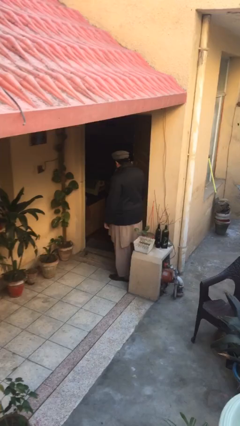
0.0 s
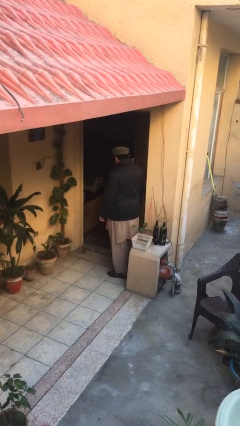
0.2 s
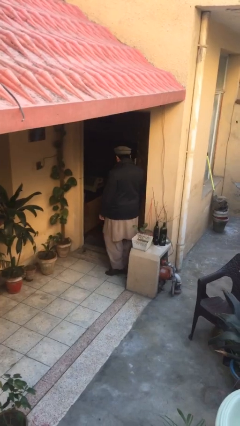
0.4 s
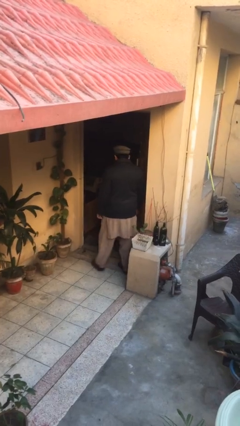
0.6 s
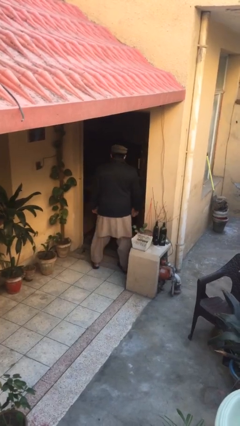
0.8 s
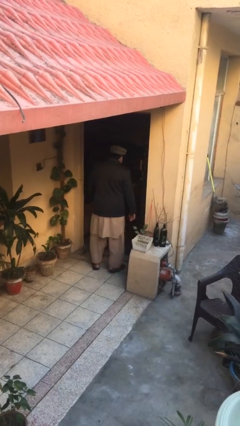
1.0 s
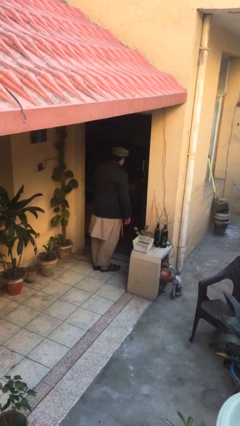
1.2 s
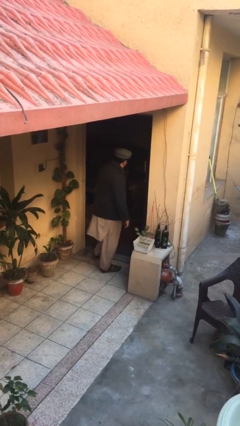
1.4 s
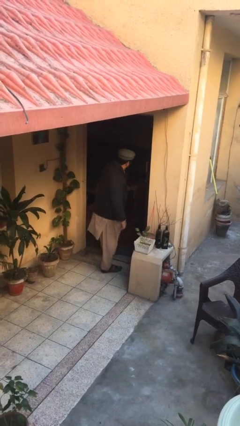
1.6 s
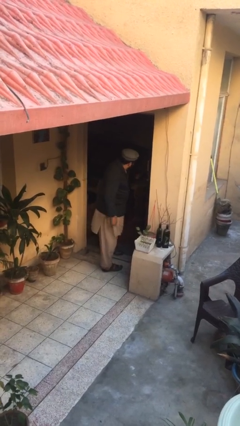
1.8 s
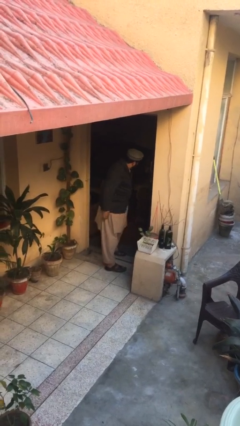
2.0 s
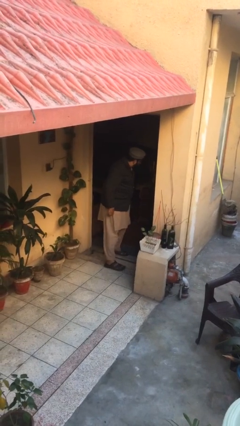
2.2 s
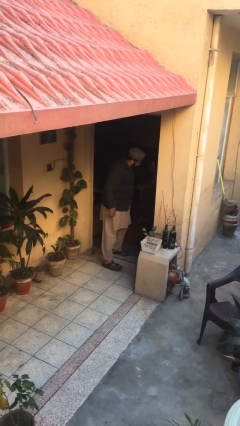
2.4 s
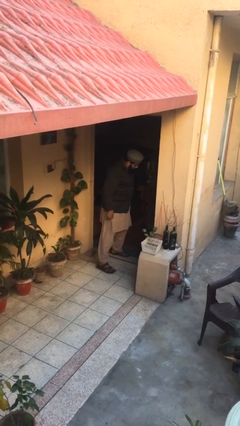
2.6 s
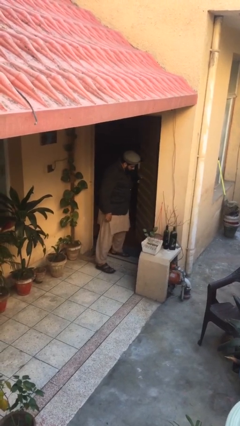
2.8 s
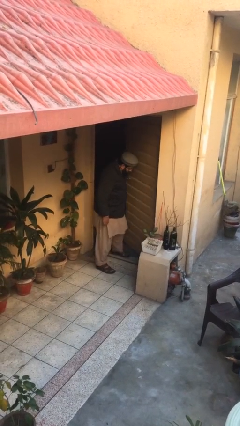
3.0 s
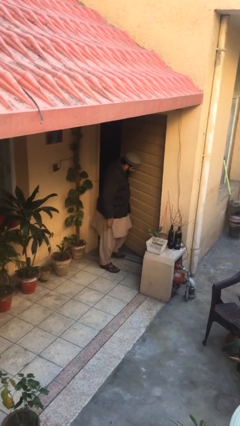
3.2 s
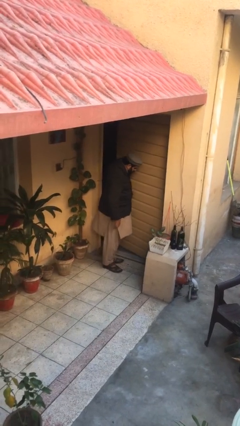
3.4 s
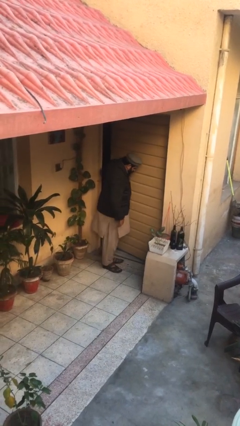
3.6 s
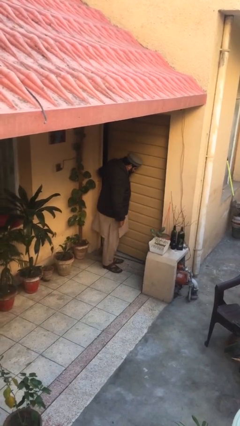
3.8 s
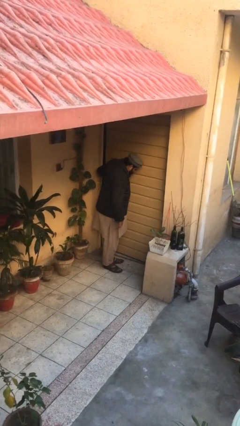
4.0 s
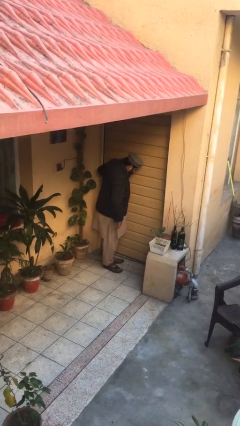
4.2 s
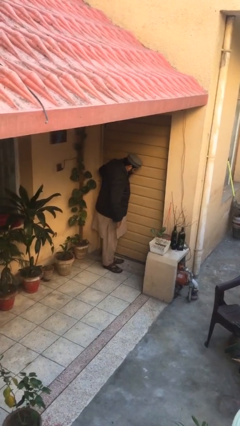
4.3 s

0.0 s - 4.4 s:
person closes facility door

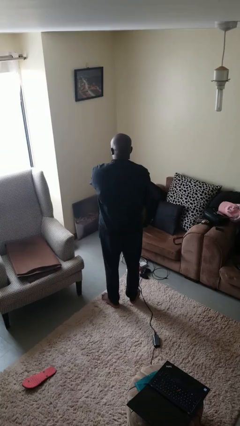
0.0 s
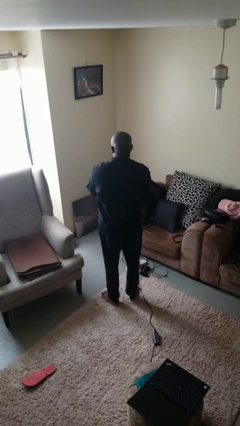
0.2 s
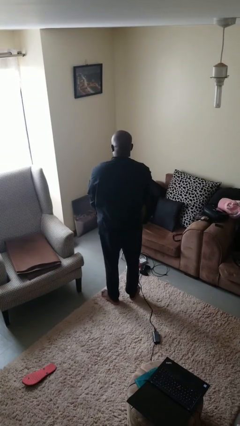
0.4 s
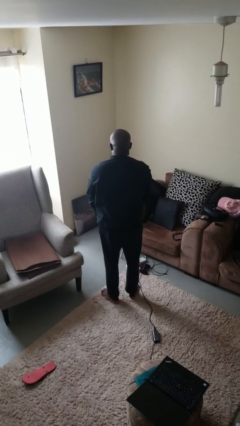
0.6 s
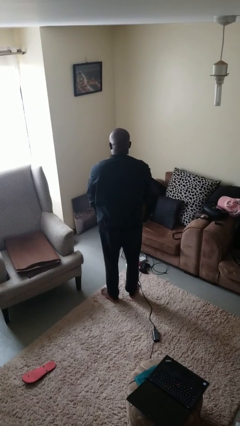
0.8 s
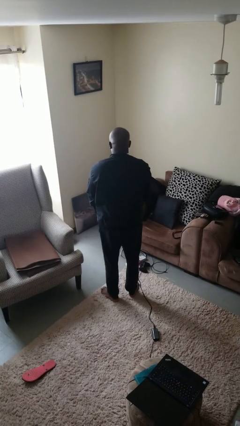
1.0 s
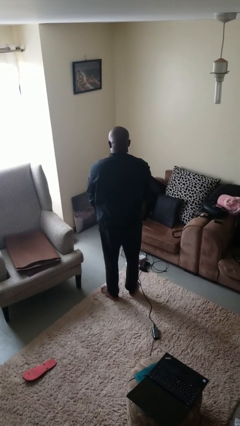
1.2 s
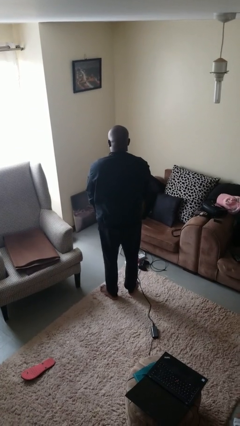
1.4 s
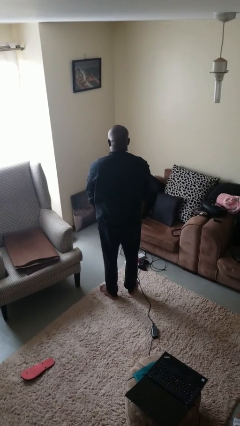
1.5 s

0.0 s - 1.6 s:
person unzips jacket

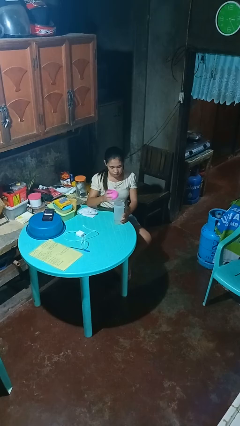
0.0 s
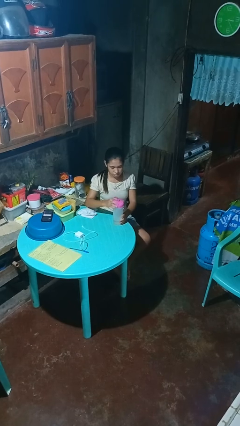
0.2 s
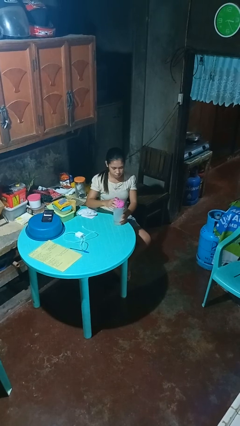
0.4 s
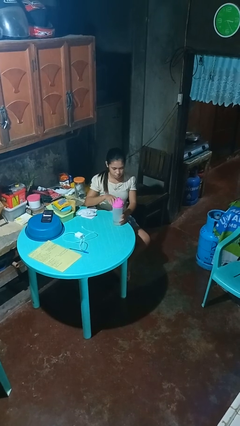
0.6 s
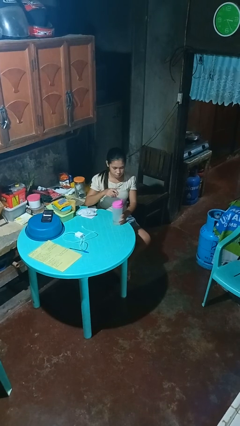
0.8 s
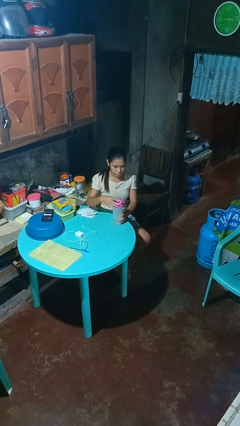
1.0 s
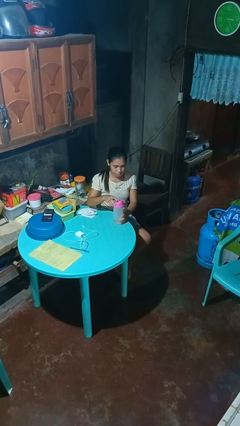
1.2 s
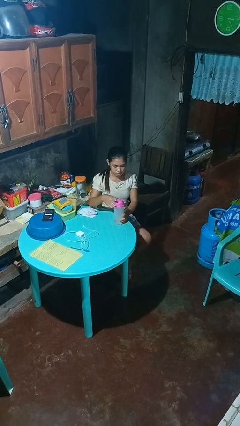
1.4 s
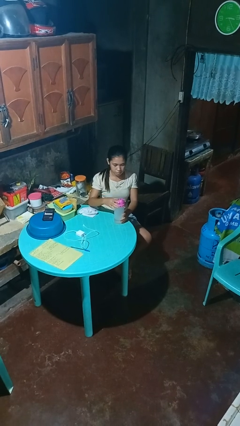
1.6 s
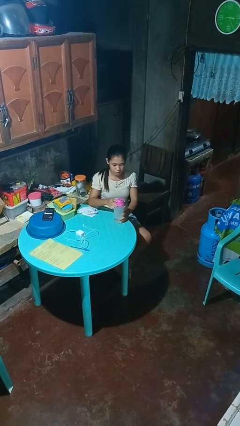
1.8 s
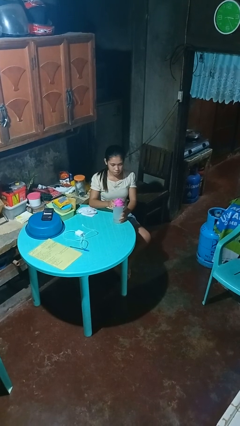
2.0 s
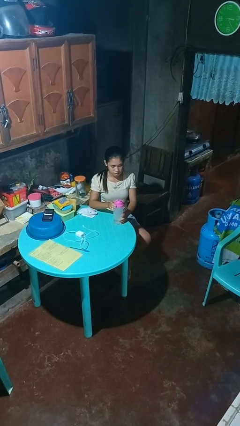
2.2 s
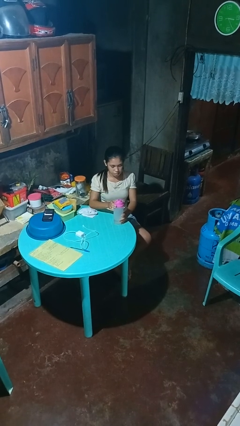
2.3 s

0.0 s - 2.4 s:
person screws lid to bottle

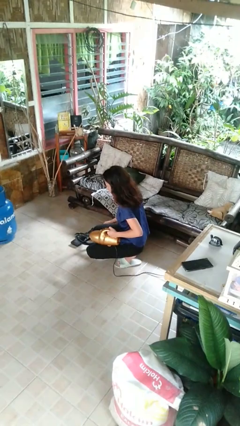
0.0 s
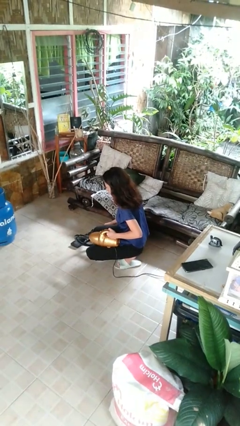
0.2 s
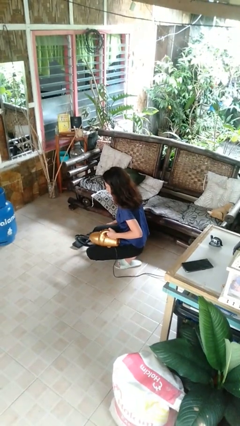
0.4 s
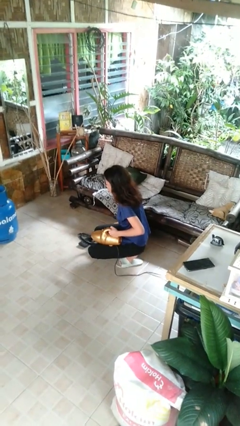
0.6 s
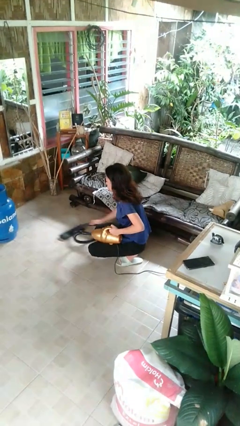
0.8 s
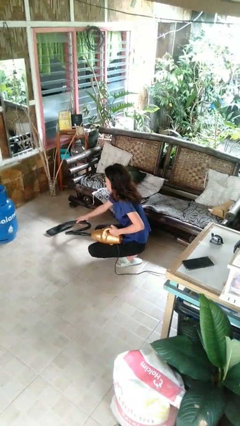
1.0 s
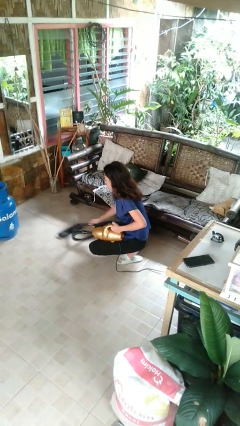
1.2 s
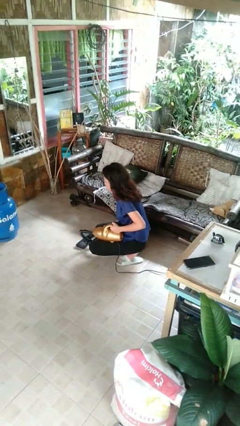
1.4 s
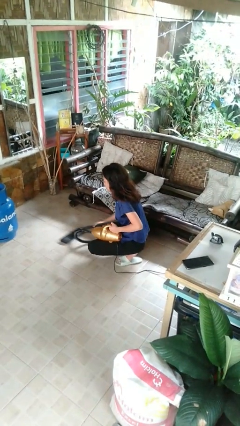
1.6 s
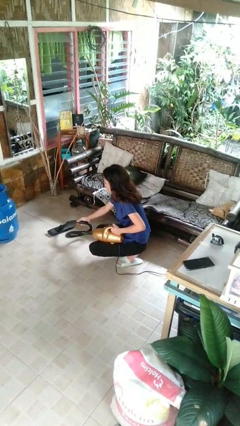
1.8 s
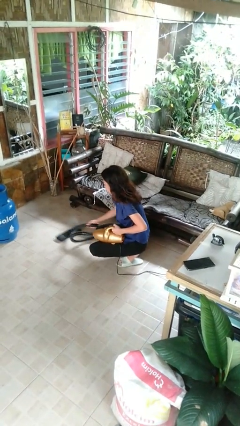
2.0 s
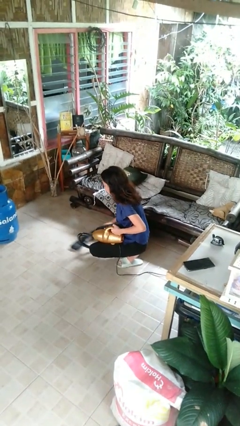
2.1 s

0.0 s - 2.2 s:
person vacuums carpet

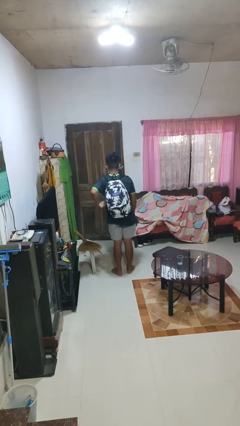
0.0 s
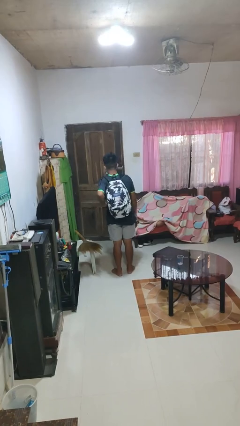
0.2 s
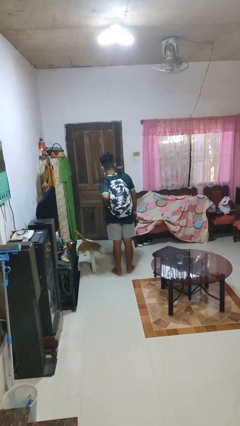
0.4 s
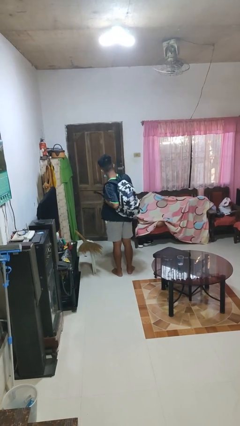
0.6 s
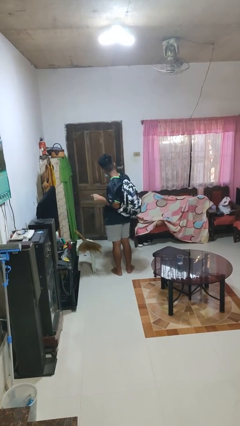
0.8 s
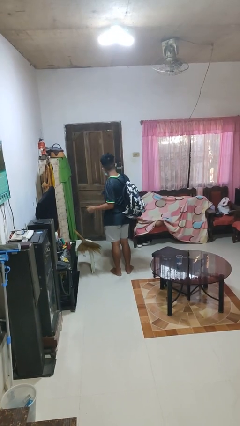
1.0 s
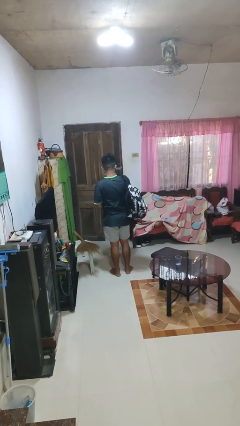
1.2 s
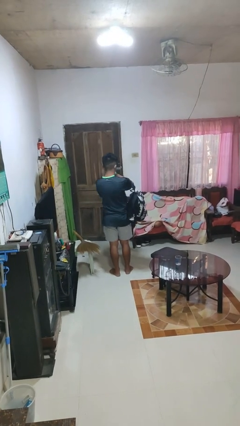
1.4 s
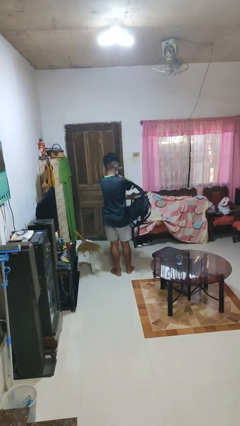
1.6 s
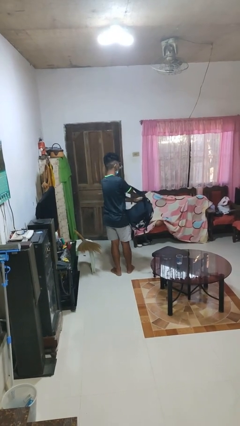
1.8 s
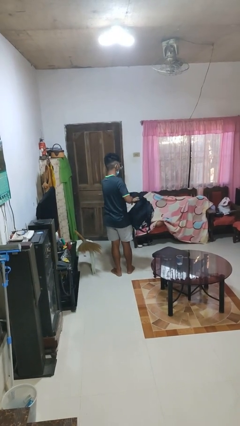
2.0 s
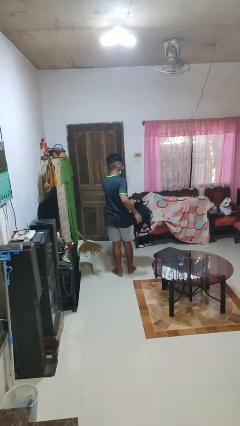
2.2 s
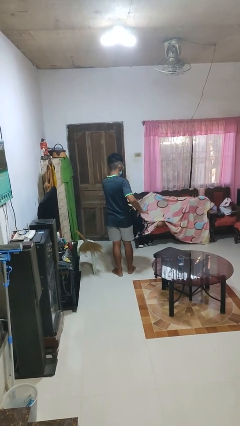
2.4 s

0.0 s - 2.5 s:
person takes off backpack

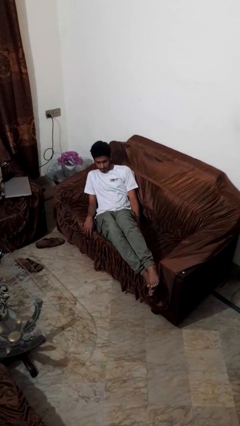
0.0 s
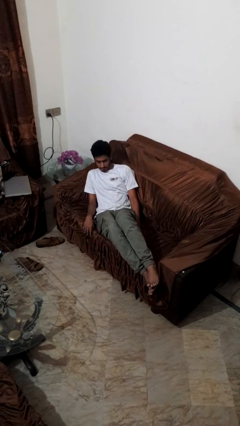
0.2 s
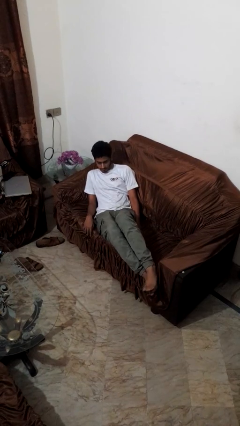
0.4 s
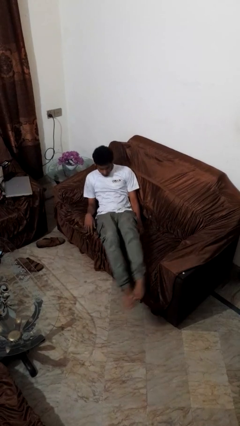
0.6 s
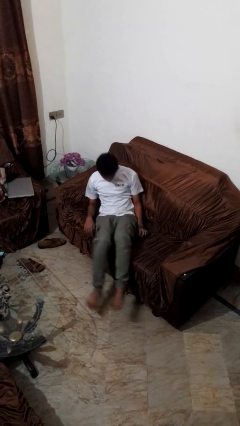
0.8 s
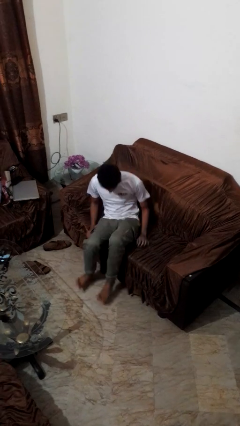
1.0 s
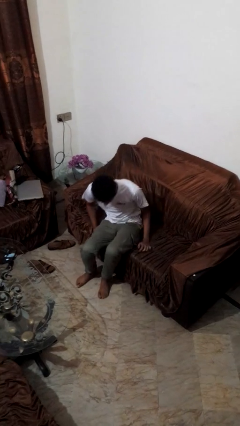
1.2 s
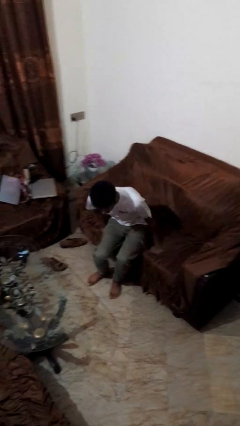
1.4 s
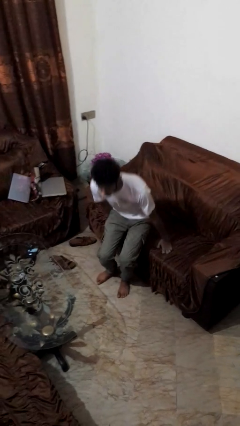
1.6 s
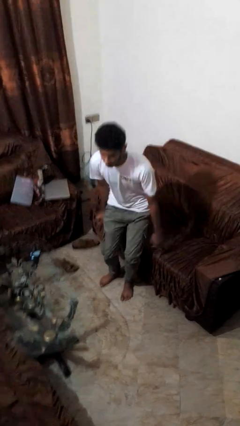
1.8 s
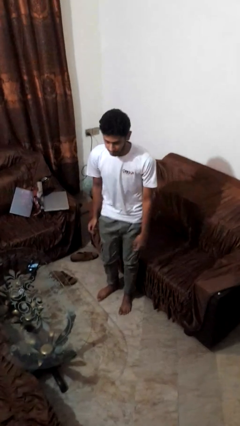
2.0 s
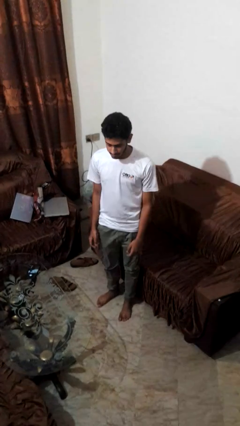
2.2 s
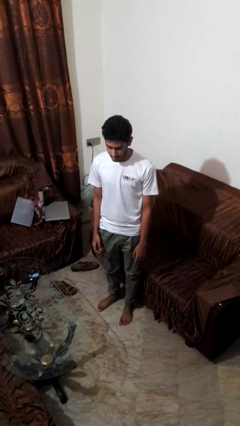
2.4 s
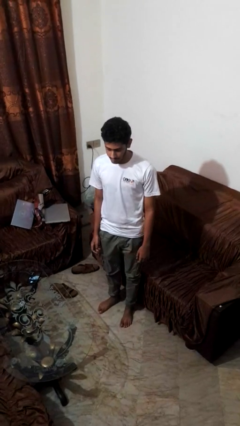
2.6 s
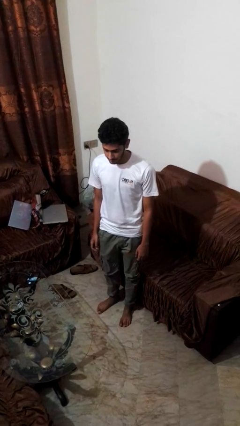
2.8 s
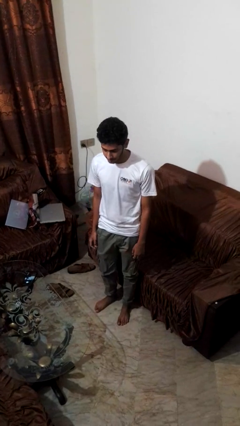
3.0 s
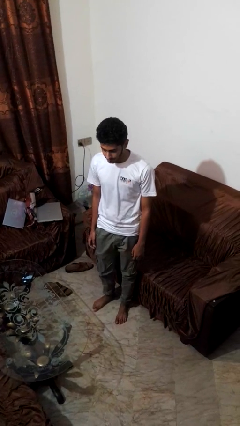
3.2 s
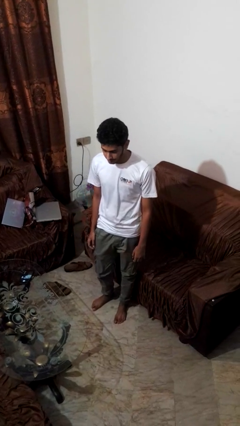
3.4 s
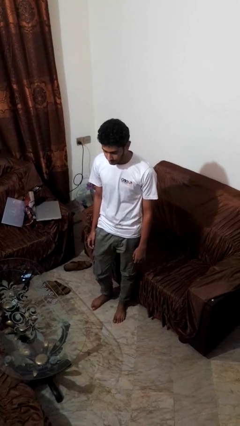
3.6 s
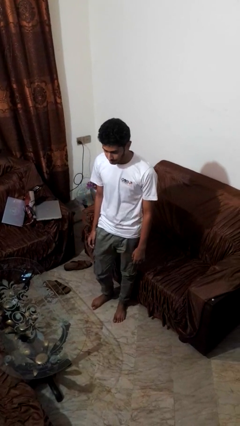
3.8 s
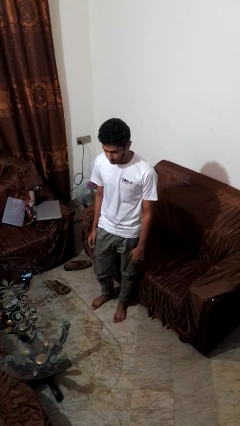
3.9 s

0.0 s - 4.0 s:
person stands up

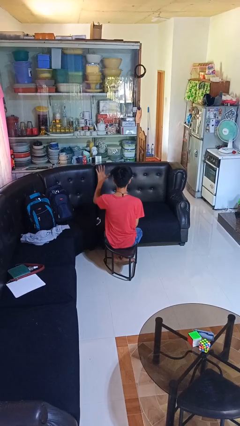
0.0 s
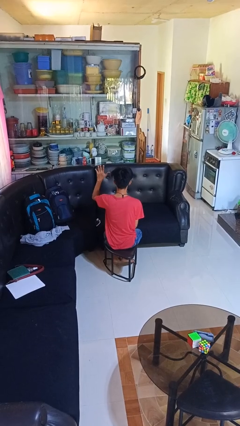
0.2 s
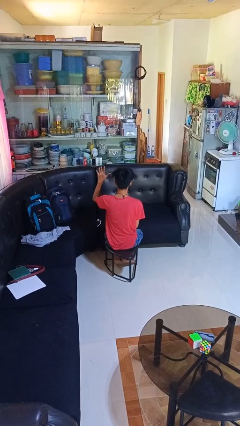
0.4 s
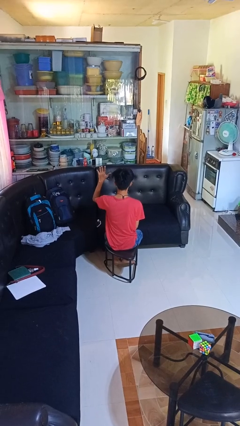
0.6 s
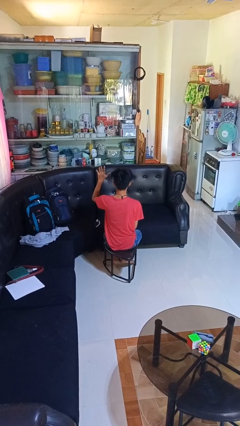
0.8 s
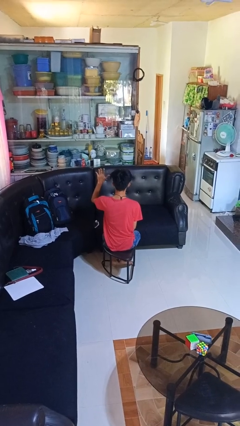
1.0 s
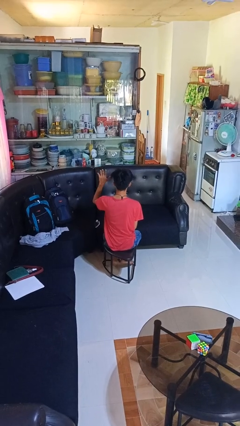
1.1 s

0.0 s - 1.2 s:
person gestures number five
